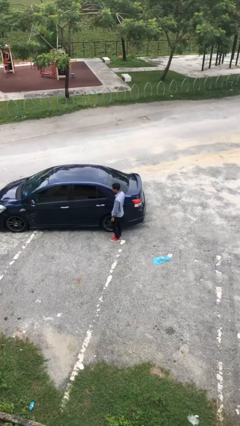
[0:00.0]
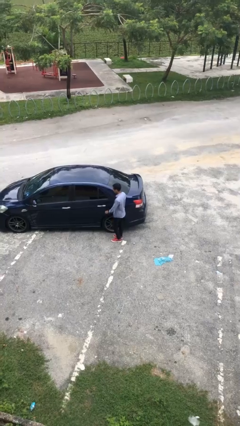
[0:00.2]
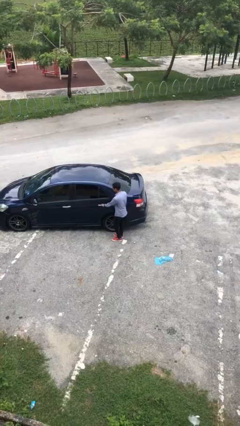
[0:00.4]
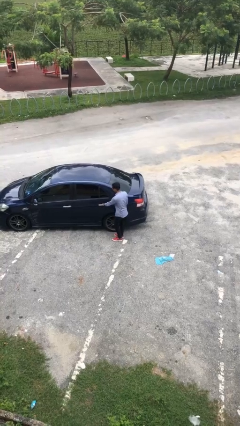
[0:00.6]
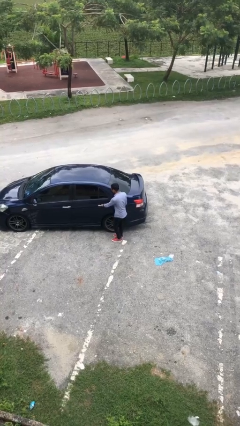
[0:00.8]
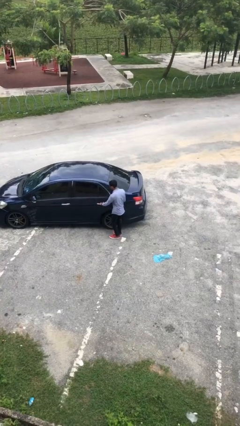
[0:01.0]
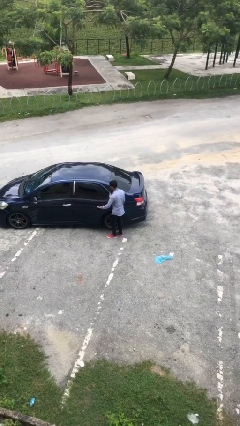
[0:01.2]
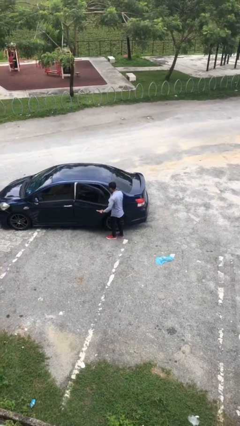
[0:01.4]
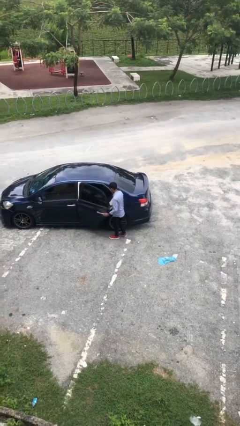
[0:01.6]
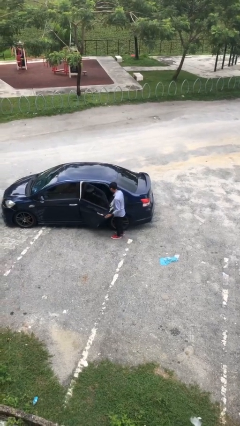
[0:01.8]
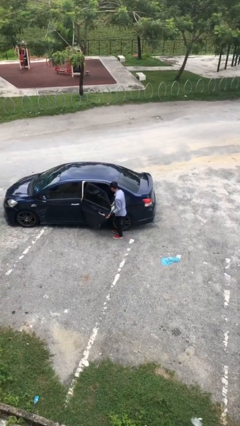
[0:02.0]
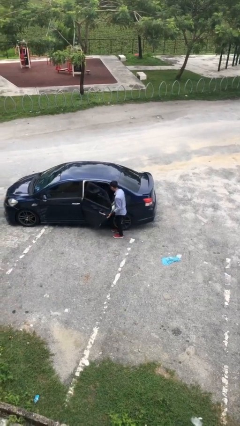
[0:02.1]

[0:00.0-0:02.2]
person opens car door

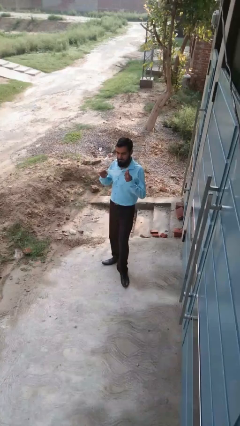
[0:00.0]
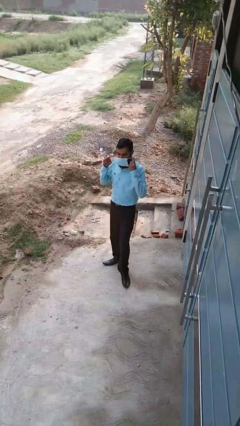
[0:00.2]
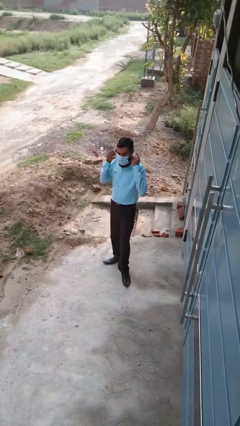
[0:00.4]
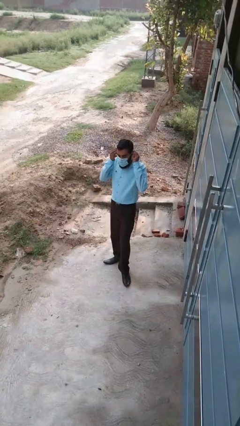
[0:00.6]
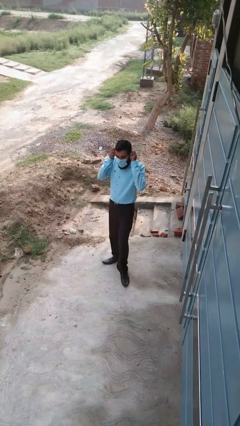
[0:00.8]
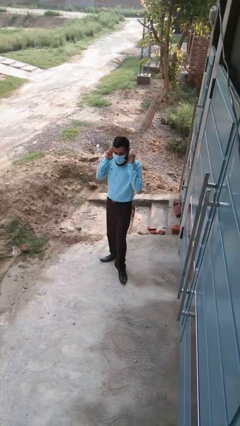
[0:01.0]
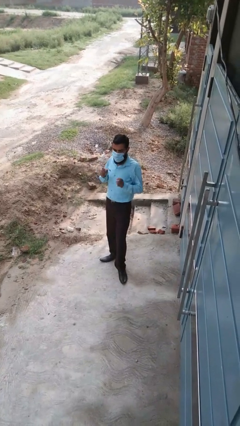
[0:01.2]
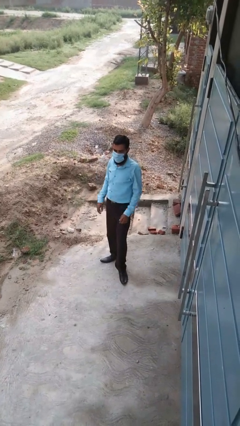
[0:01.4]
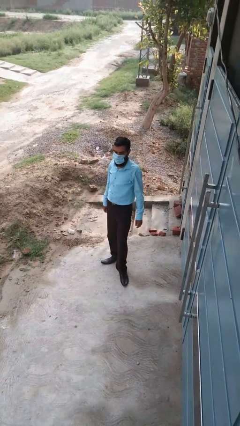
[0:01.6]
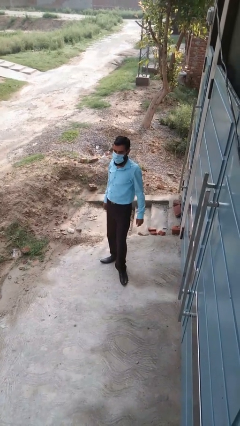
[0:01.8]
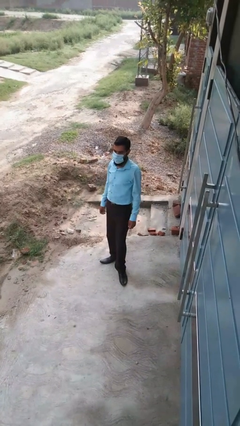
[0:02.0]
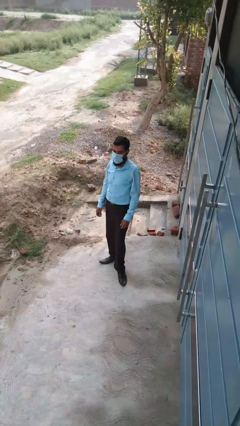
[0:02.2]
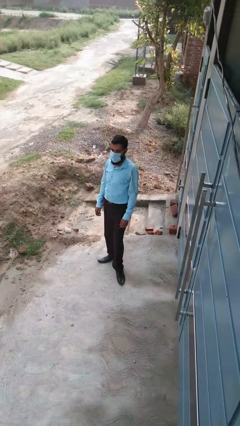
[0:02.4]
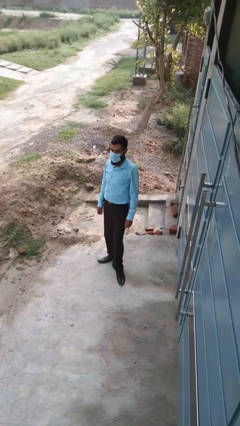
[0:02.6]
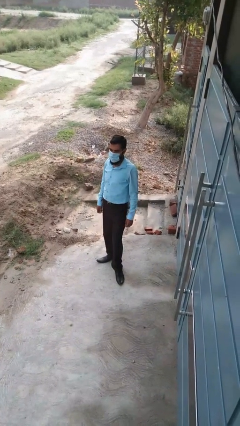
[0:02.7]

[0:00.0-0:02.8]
person puts on facemask

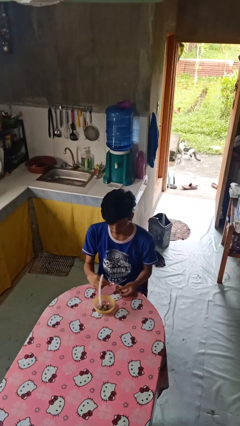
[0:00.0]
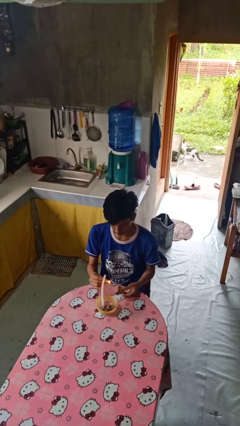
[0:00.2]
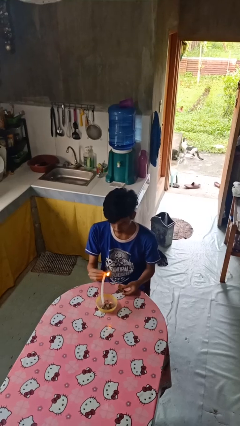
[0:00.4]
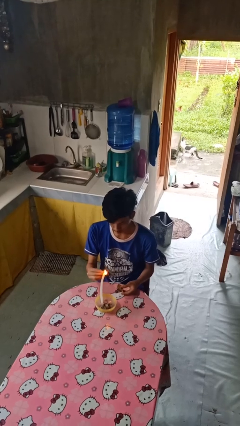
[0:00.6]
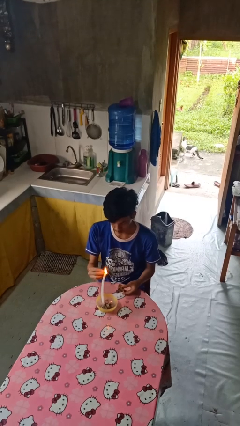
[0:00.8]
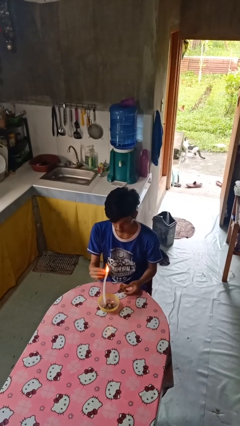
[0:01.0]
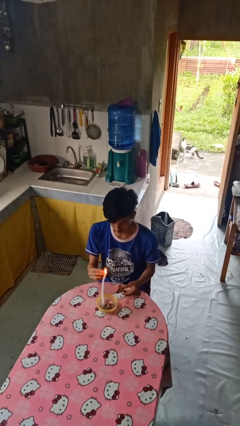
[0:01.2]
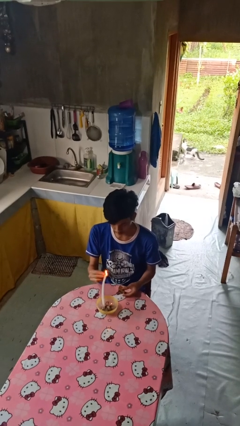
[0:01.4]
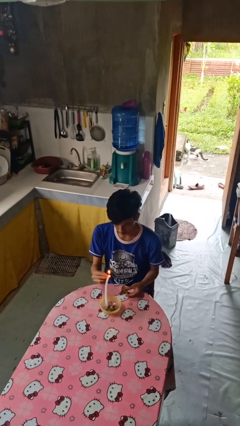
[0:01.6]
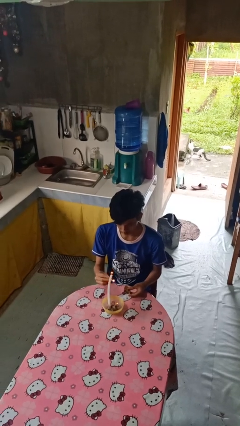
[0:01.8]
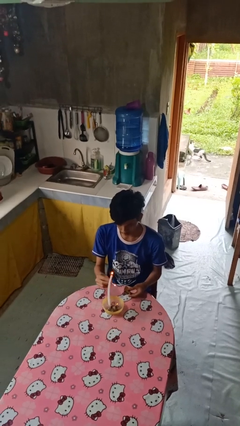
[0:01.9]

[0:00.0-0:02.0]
person lights candle

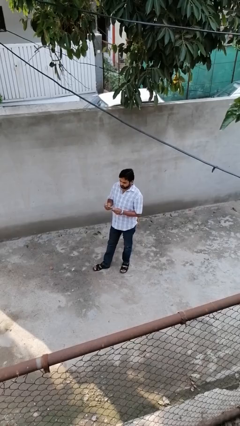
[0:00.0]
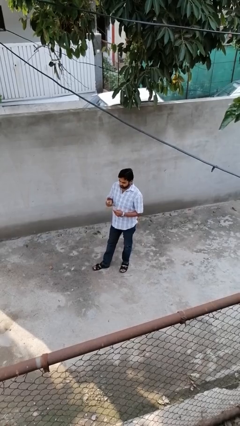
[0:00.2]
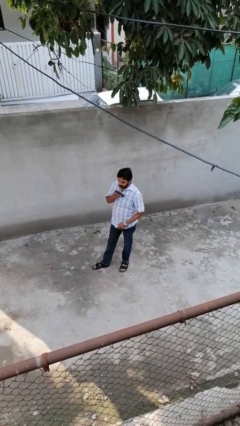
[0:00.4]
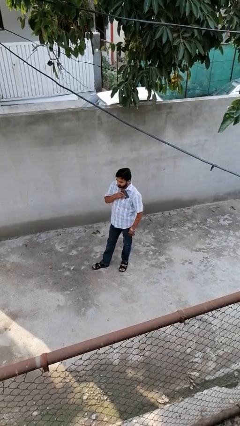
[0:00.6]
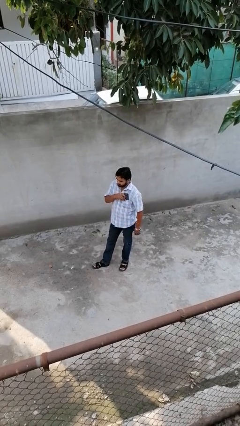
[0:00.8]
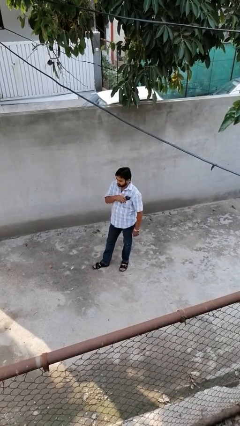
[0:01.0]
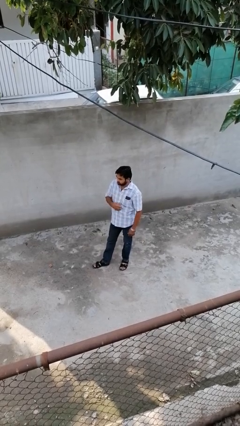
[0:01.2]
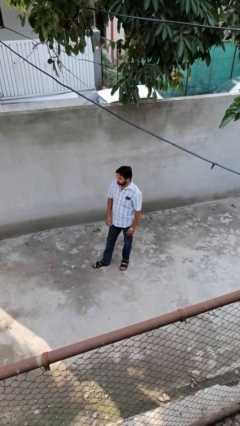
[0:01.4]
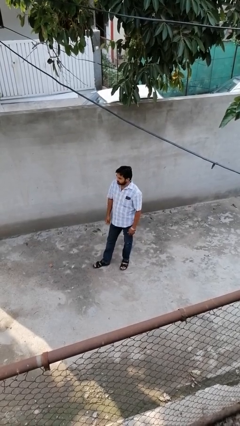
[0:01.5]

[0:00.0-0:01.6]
person puts phone into pocket

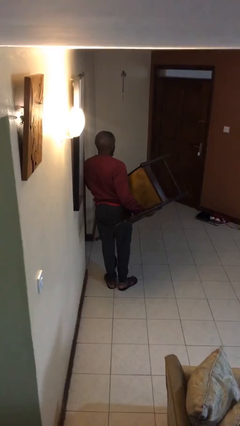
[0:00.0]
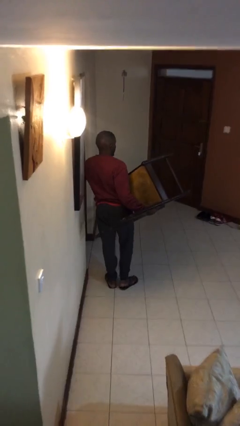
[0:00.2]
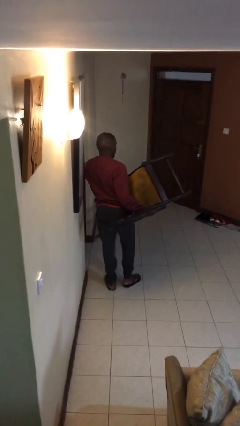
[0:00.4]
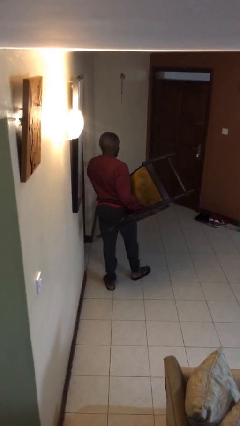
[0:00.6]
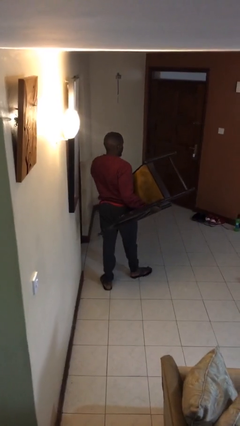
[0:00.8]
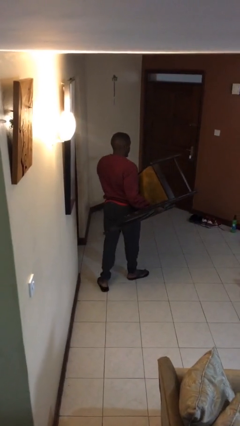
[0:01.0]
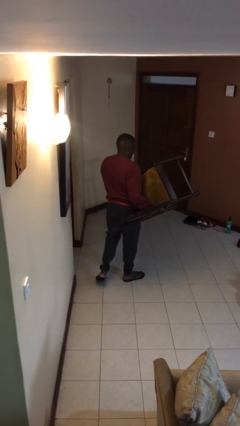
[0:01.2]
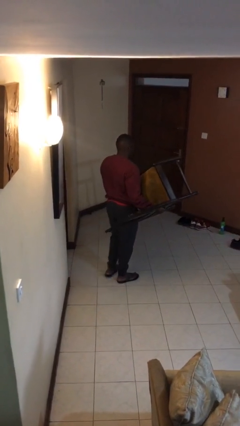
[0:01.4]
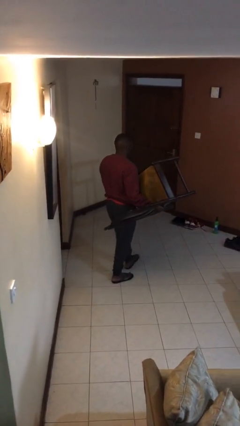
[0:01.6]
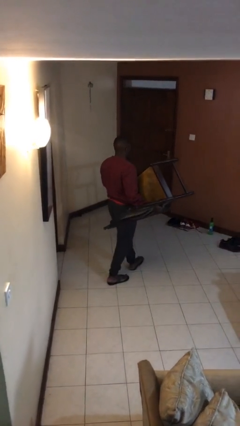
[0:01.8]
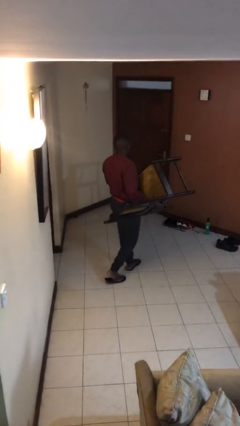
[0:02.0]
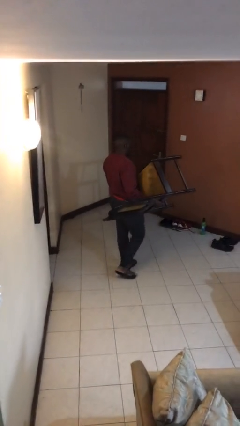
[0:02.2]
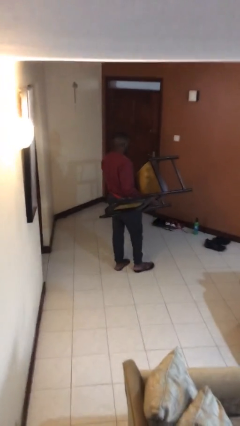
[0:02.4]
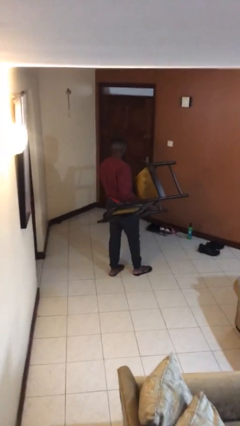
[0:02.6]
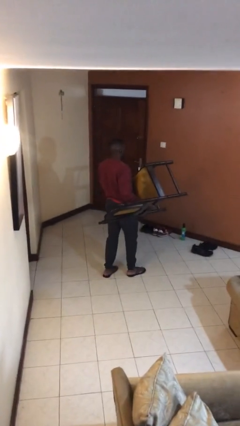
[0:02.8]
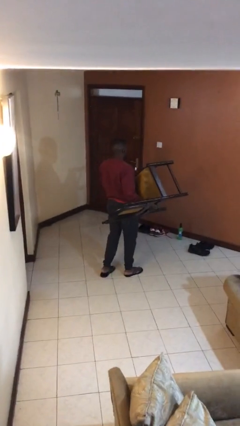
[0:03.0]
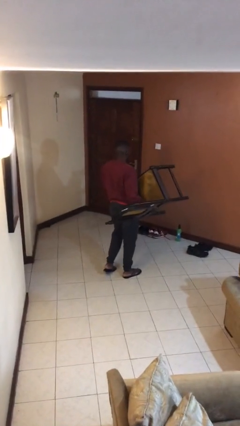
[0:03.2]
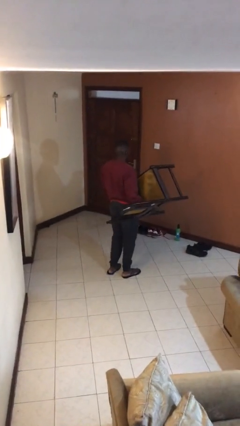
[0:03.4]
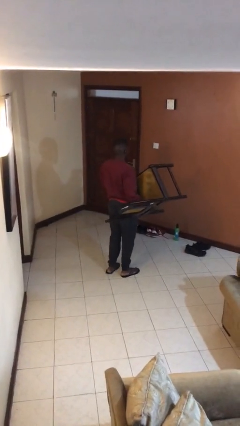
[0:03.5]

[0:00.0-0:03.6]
person carries furniture

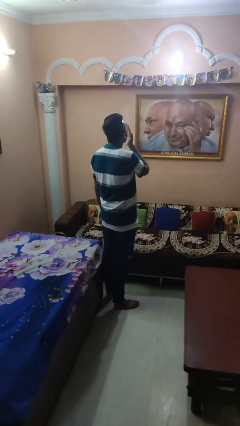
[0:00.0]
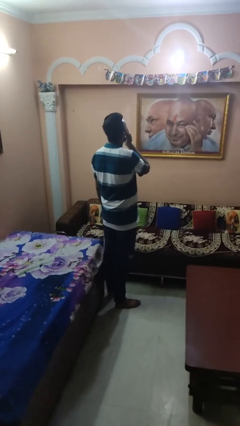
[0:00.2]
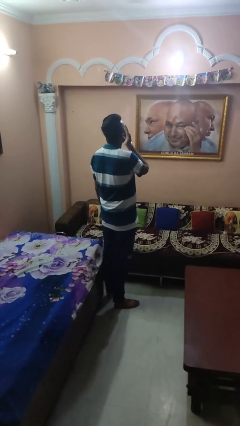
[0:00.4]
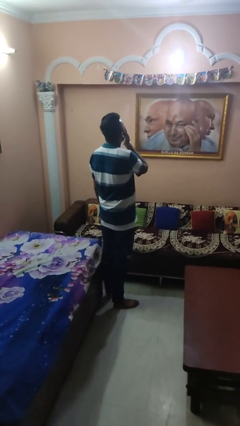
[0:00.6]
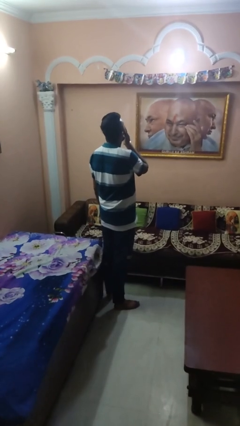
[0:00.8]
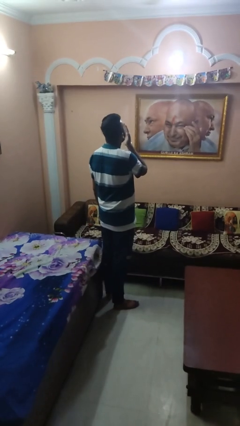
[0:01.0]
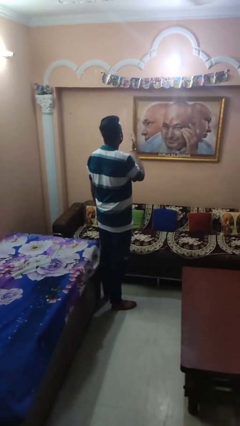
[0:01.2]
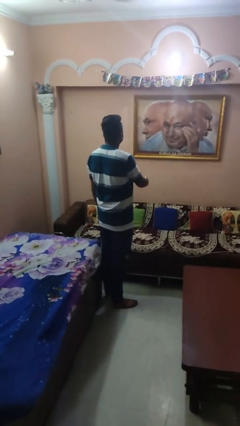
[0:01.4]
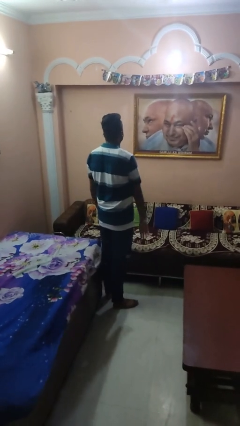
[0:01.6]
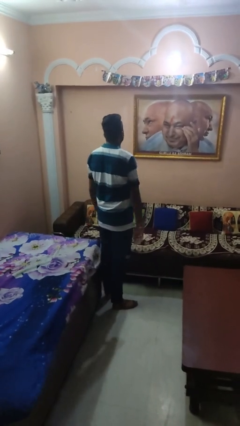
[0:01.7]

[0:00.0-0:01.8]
person yawns

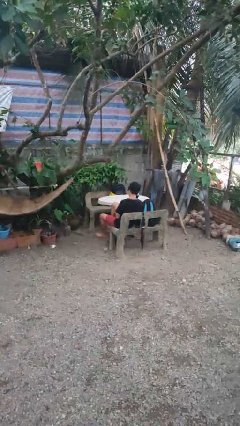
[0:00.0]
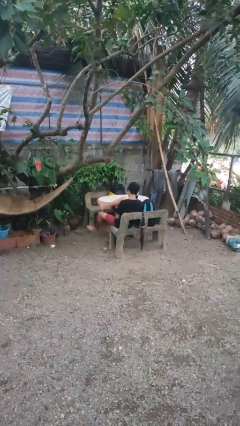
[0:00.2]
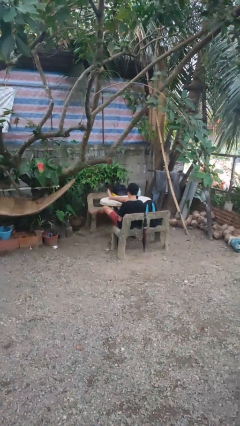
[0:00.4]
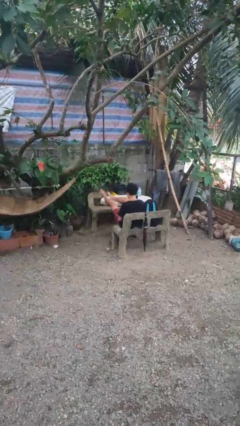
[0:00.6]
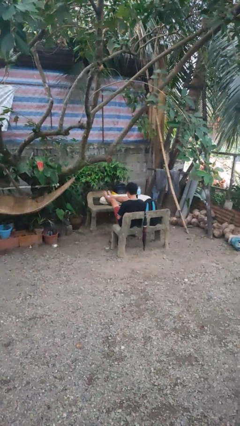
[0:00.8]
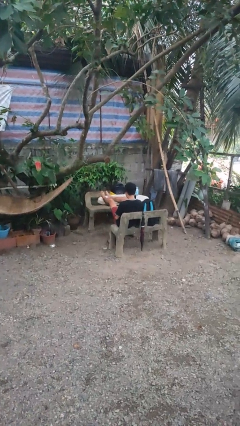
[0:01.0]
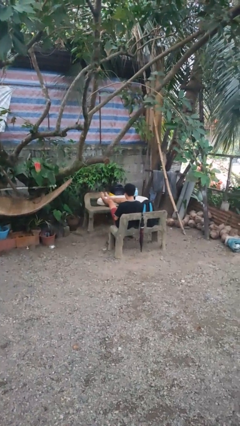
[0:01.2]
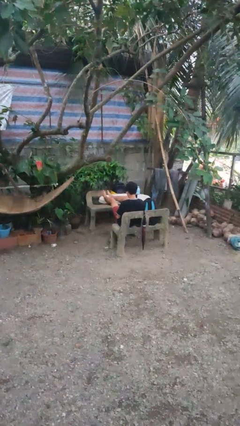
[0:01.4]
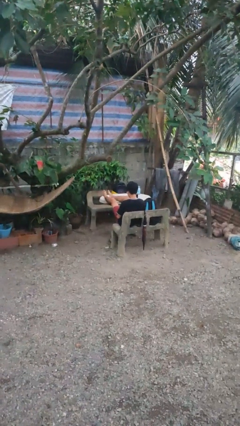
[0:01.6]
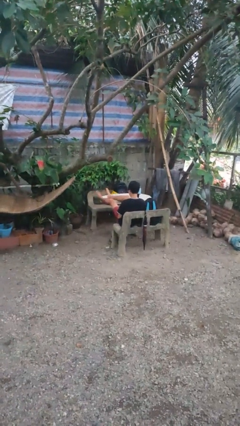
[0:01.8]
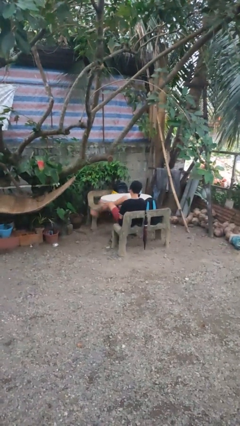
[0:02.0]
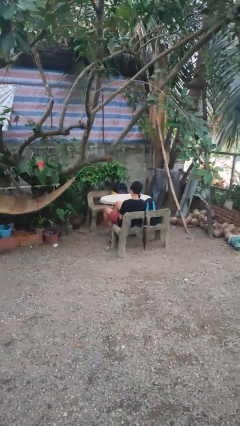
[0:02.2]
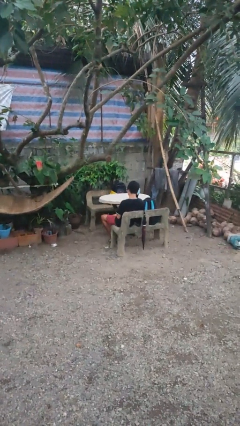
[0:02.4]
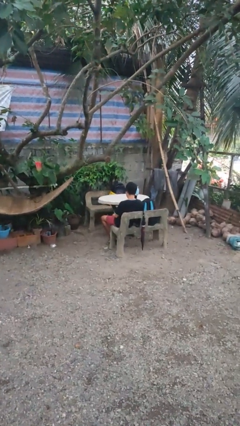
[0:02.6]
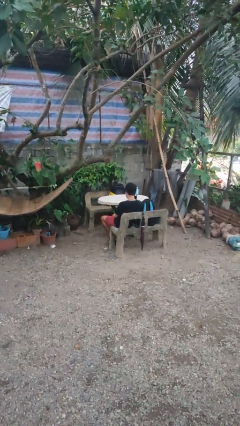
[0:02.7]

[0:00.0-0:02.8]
person puts feet up

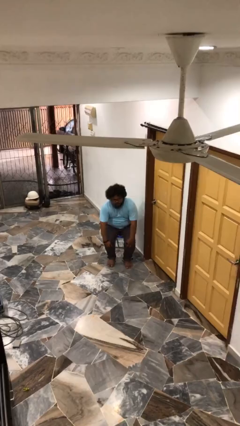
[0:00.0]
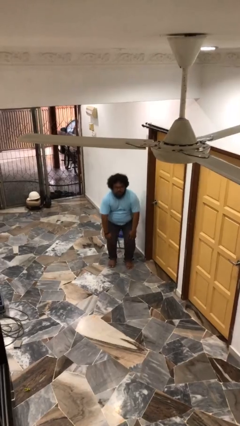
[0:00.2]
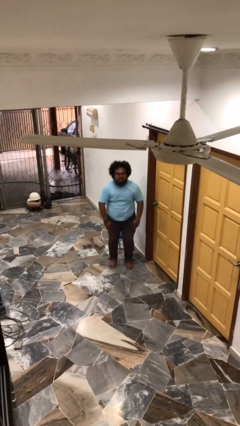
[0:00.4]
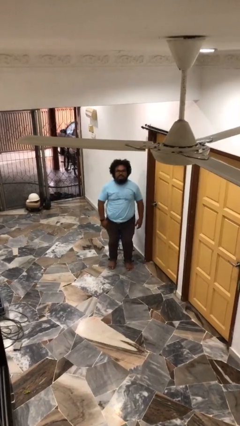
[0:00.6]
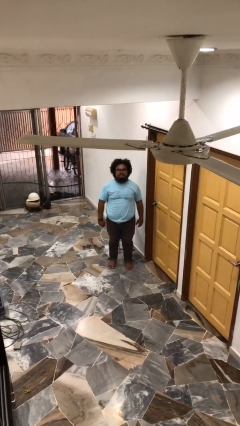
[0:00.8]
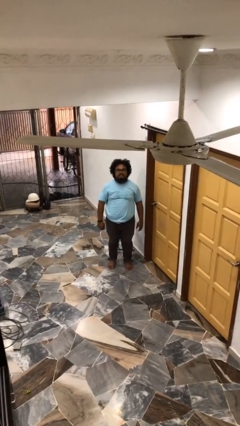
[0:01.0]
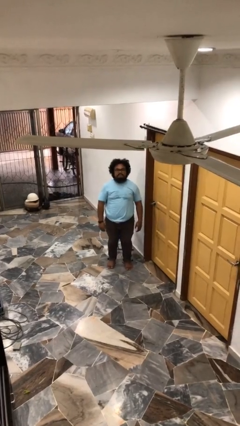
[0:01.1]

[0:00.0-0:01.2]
person stands up
